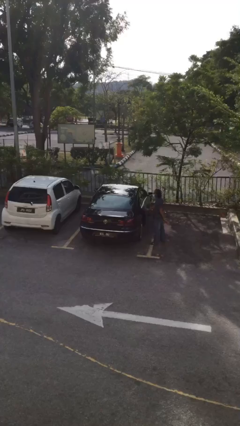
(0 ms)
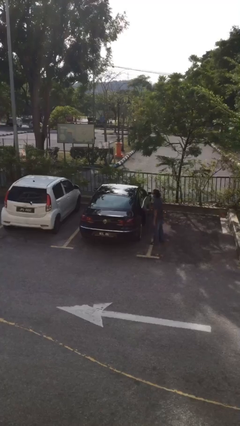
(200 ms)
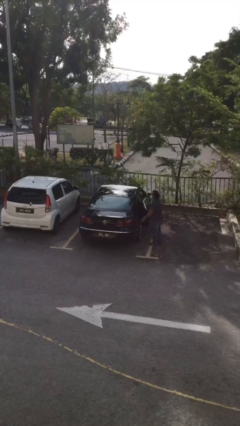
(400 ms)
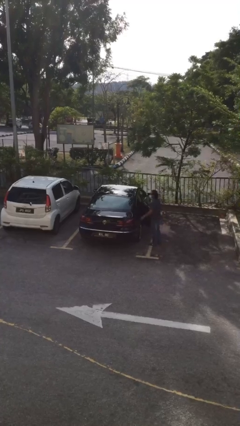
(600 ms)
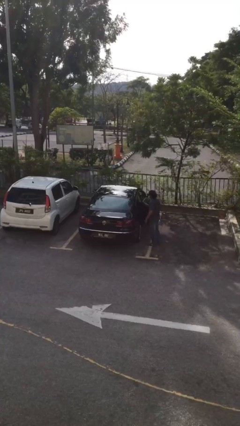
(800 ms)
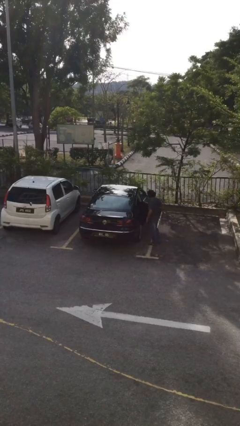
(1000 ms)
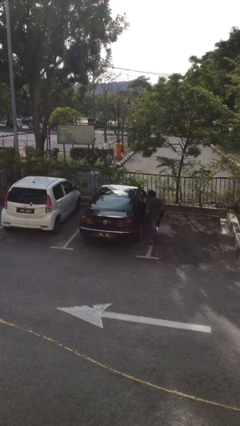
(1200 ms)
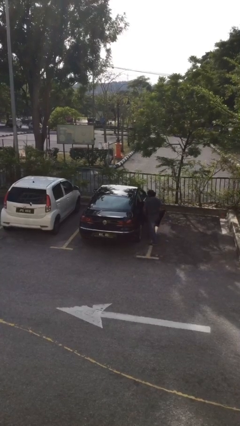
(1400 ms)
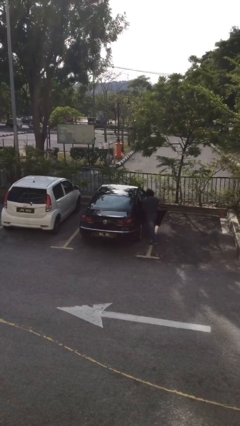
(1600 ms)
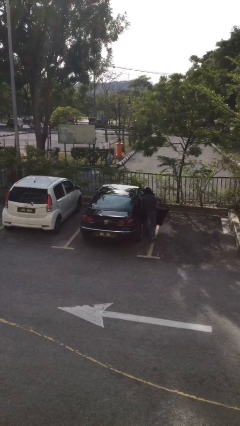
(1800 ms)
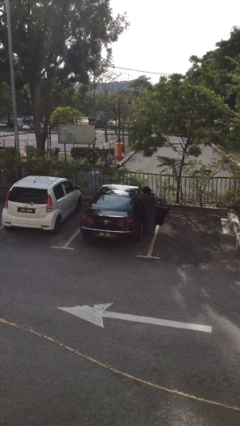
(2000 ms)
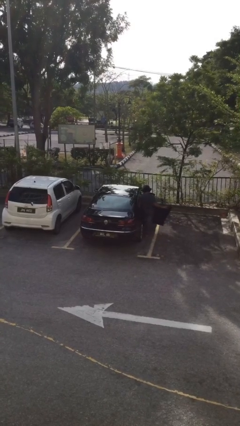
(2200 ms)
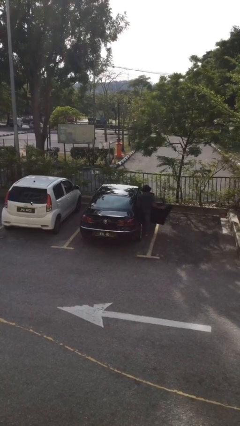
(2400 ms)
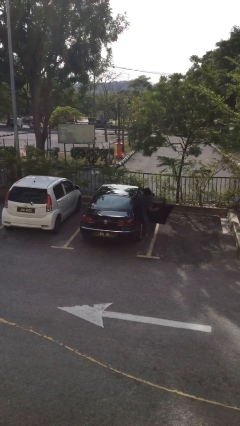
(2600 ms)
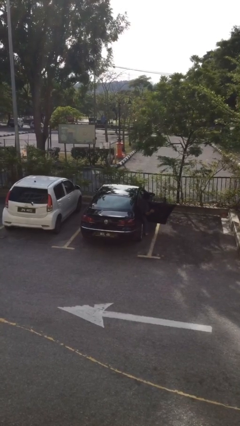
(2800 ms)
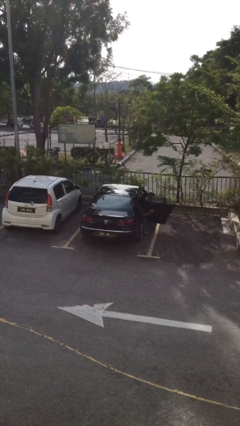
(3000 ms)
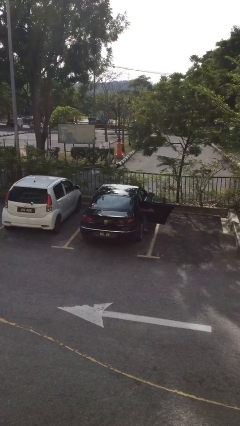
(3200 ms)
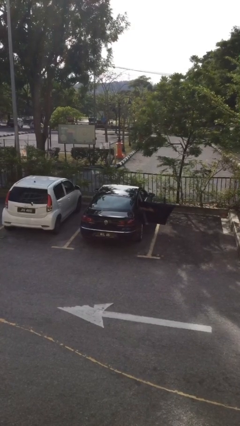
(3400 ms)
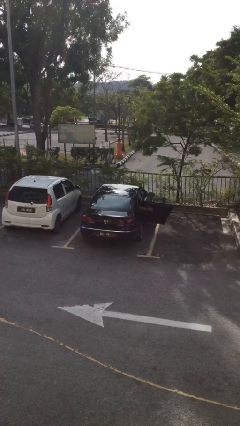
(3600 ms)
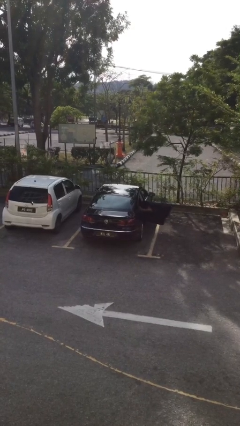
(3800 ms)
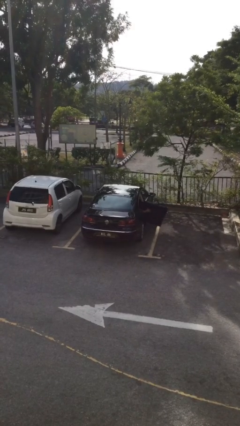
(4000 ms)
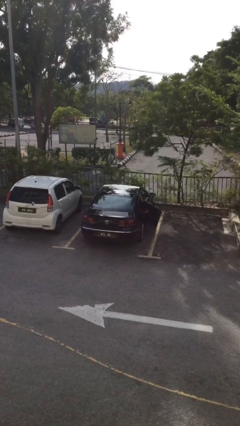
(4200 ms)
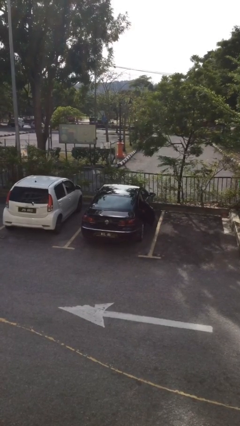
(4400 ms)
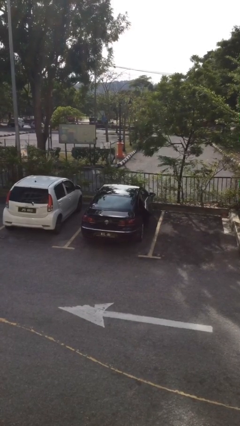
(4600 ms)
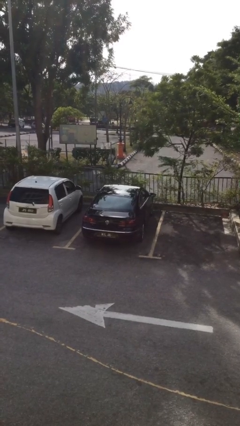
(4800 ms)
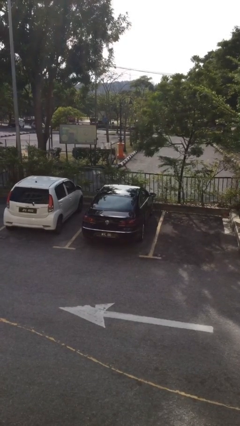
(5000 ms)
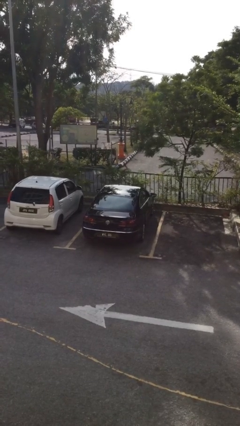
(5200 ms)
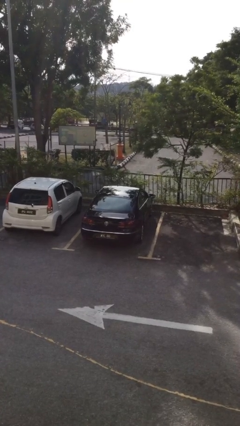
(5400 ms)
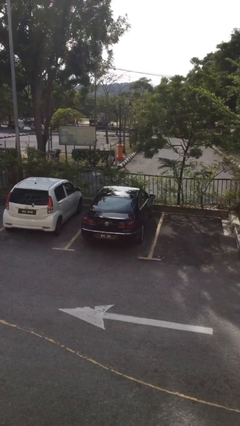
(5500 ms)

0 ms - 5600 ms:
car picks up person

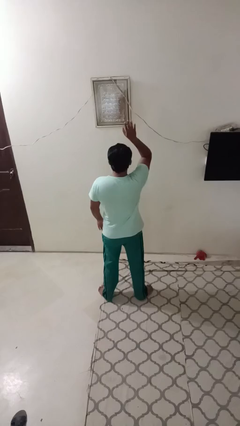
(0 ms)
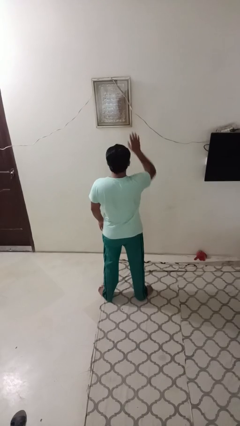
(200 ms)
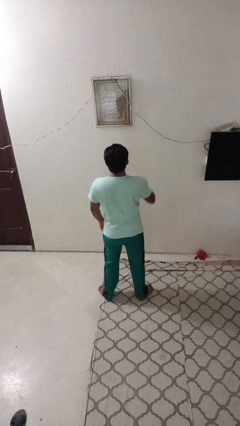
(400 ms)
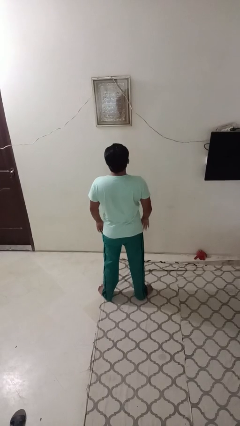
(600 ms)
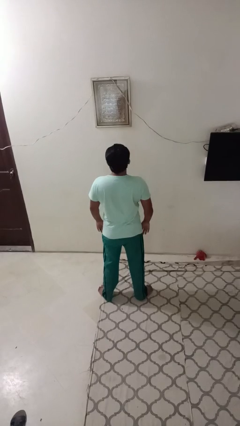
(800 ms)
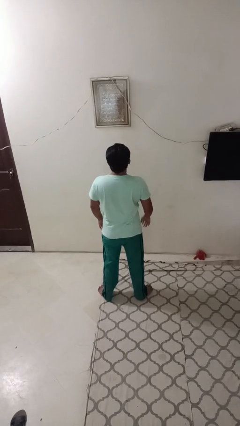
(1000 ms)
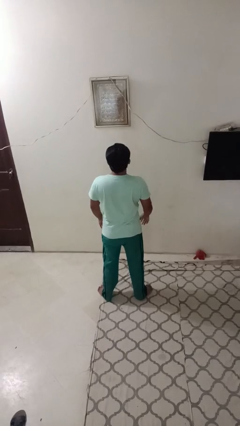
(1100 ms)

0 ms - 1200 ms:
person gestures lower hand

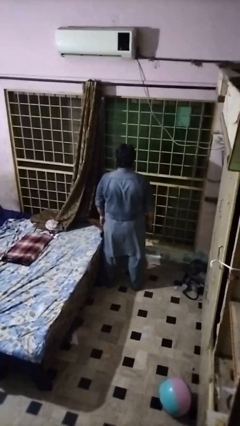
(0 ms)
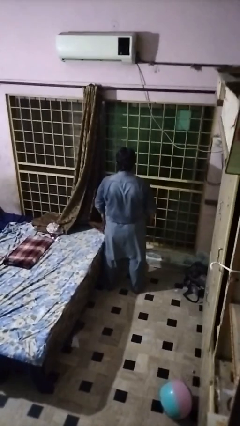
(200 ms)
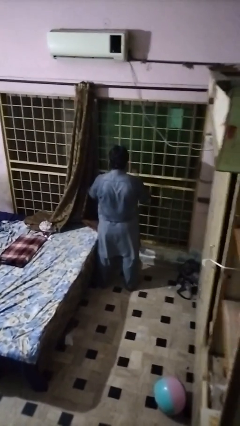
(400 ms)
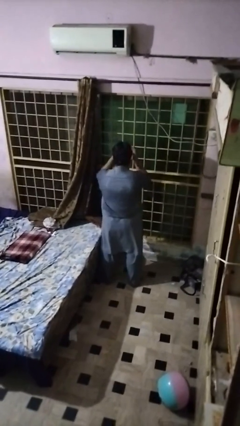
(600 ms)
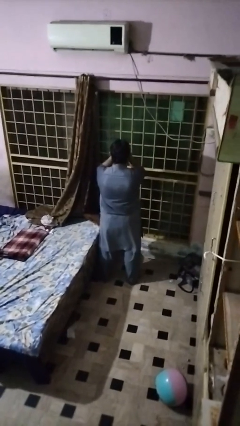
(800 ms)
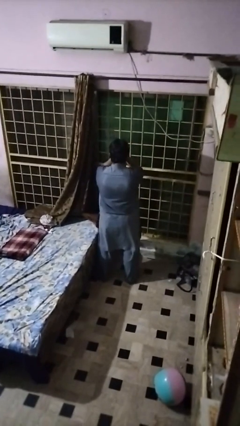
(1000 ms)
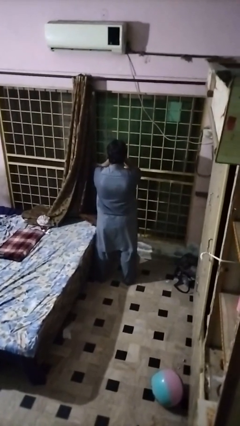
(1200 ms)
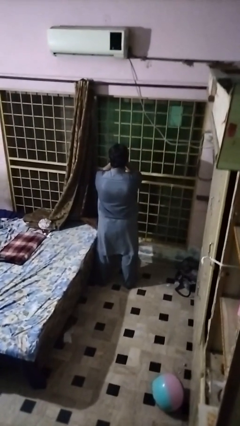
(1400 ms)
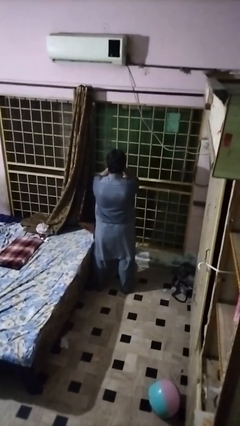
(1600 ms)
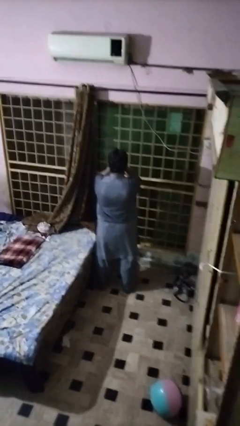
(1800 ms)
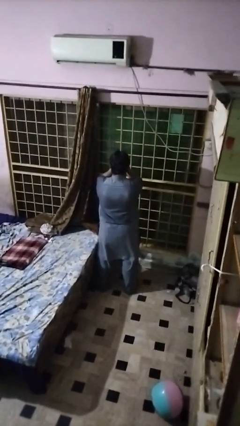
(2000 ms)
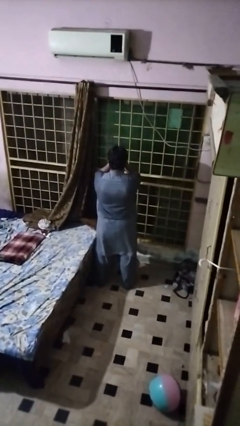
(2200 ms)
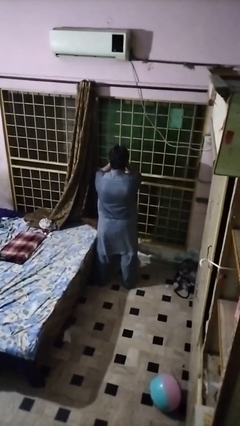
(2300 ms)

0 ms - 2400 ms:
person covers face with hands

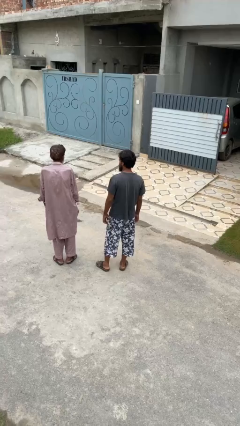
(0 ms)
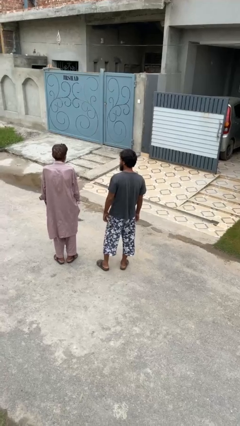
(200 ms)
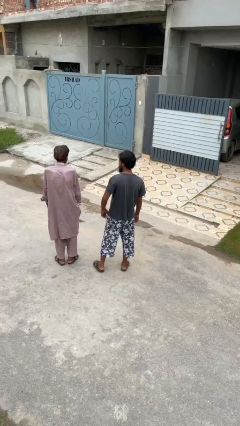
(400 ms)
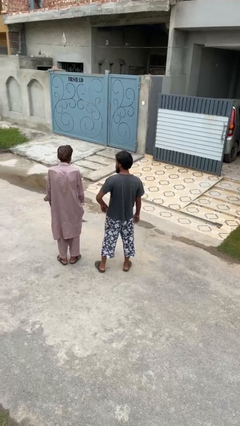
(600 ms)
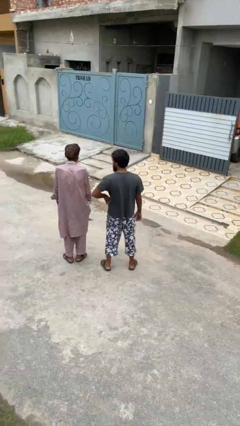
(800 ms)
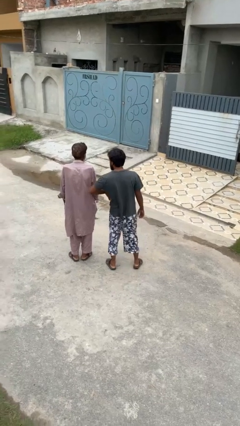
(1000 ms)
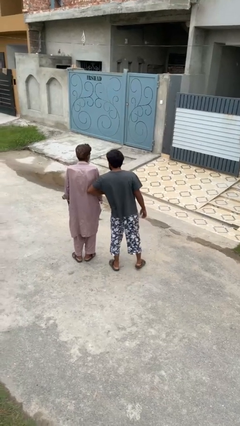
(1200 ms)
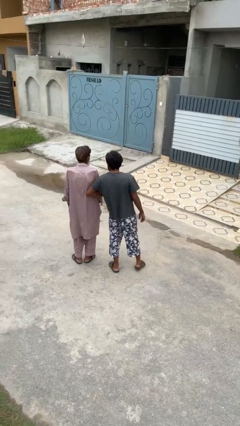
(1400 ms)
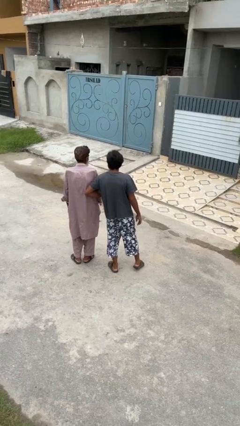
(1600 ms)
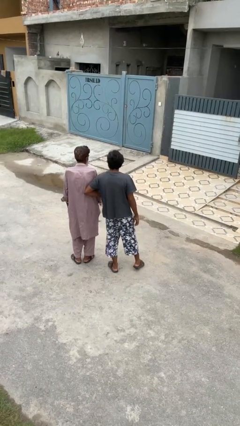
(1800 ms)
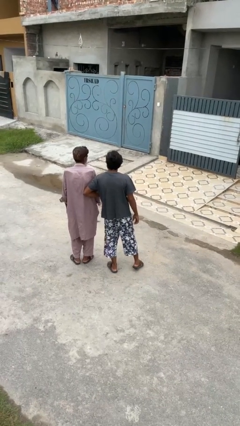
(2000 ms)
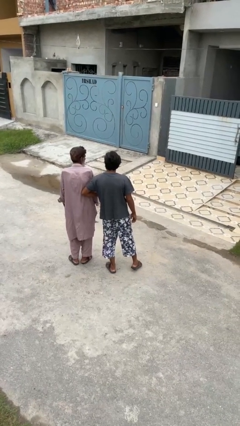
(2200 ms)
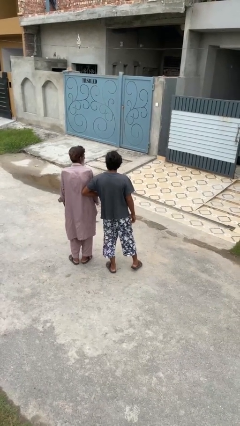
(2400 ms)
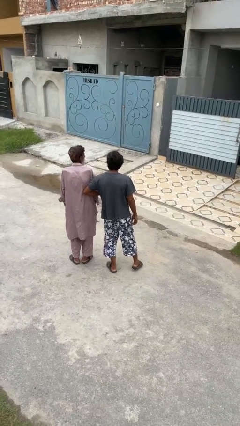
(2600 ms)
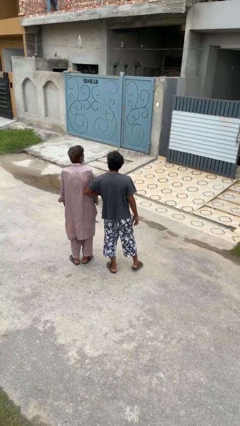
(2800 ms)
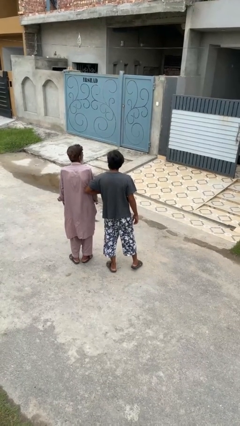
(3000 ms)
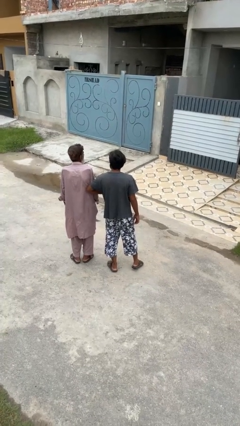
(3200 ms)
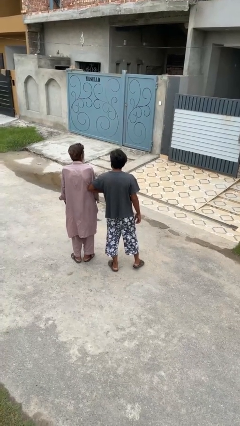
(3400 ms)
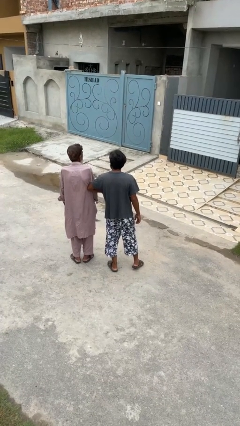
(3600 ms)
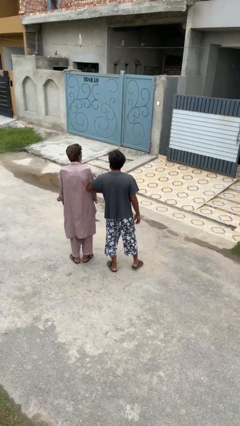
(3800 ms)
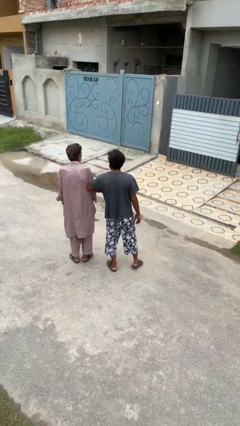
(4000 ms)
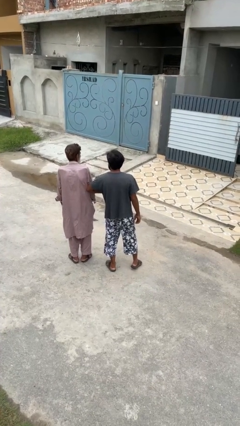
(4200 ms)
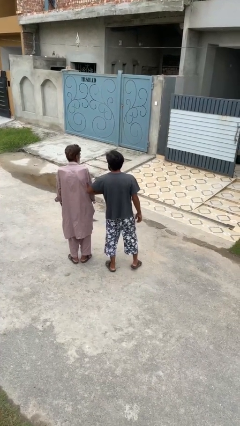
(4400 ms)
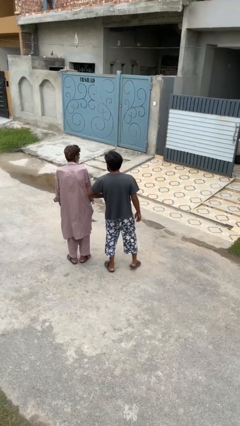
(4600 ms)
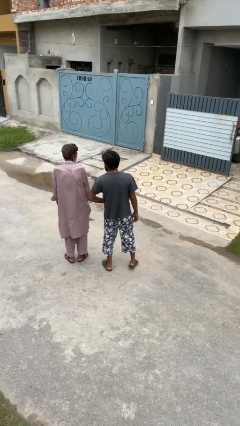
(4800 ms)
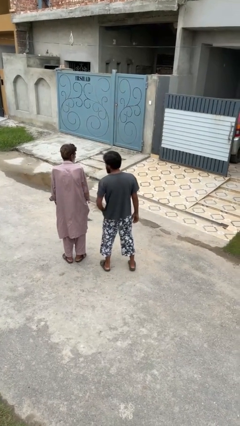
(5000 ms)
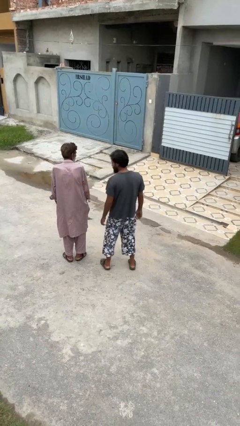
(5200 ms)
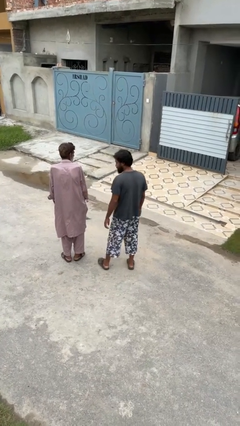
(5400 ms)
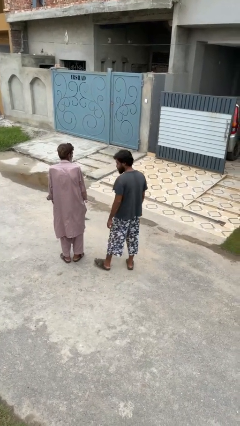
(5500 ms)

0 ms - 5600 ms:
person nudges person with elbow

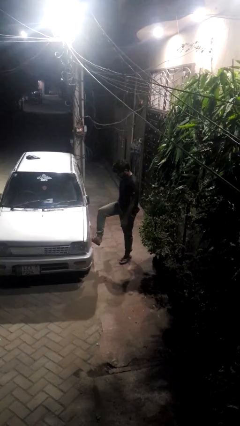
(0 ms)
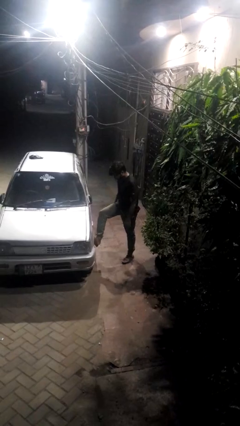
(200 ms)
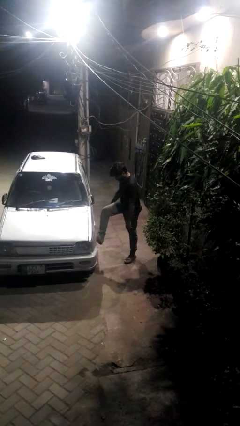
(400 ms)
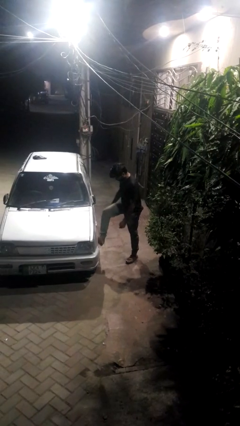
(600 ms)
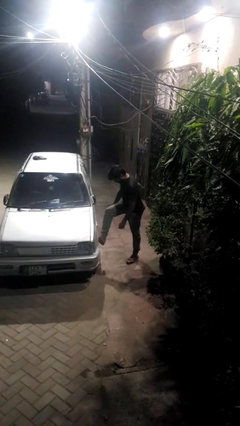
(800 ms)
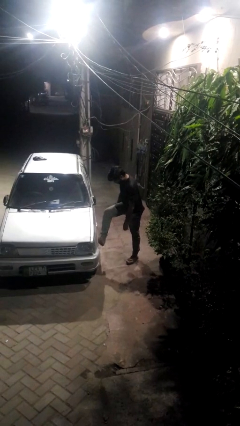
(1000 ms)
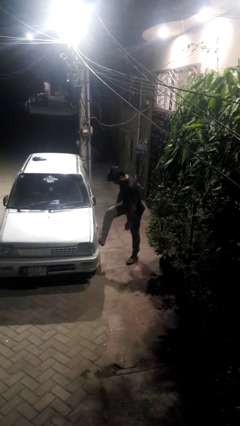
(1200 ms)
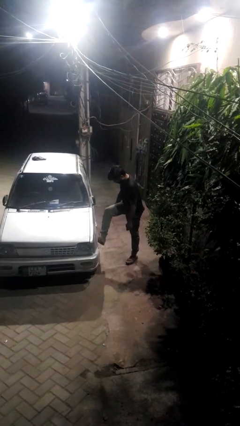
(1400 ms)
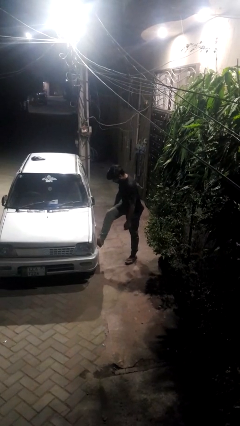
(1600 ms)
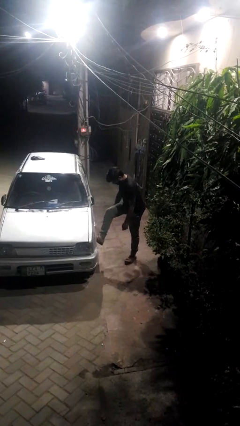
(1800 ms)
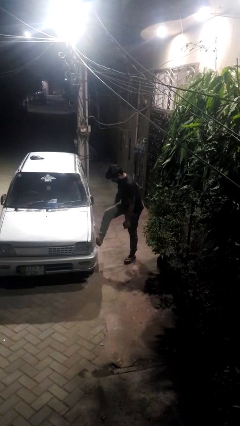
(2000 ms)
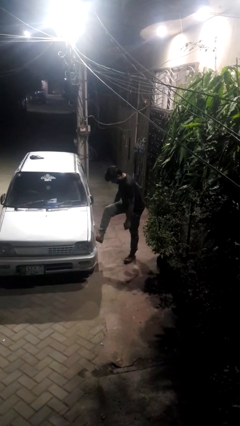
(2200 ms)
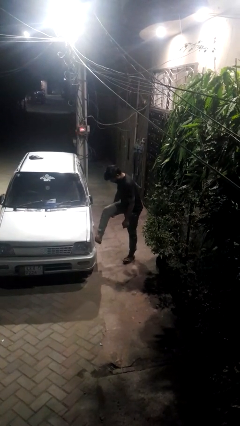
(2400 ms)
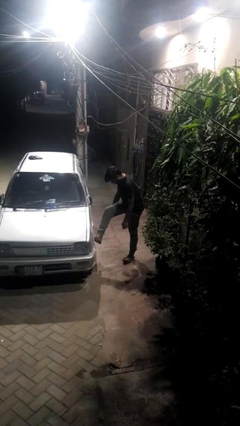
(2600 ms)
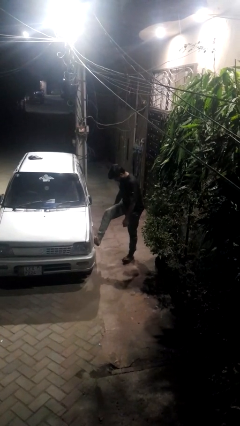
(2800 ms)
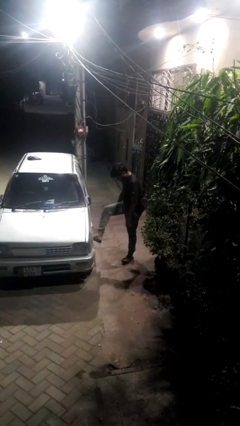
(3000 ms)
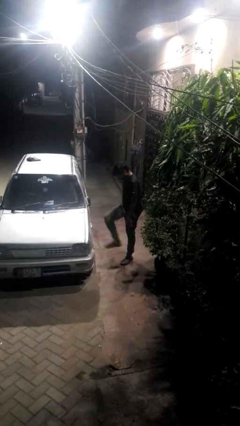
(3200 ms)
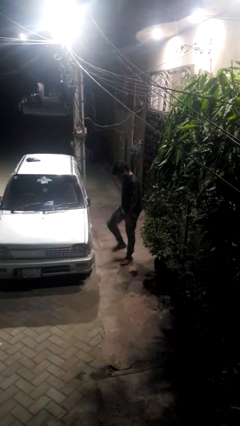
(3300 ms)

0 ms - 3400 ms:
person kicks car tires
